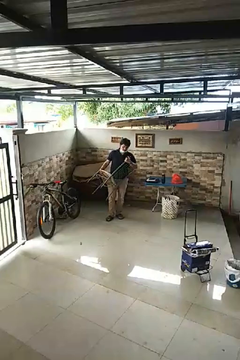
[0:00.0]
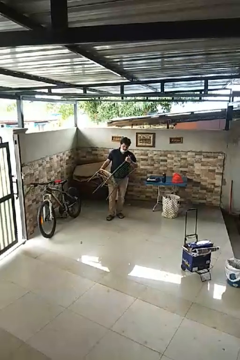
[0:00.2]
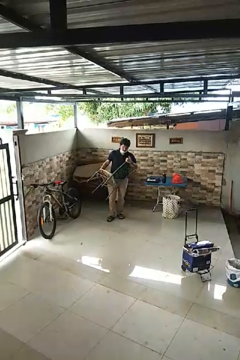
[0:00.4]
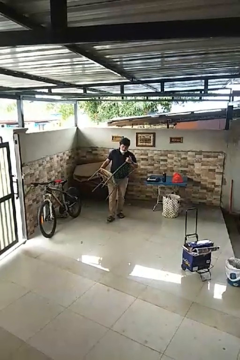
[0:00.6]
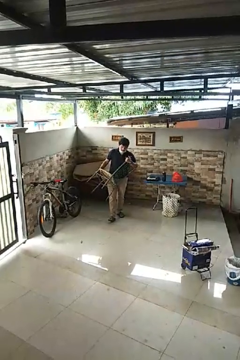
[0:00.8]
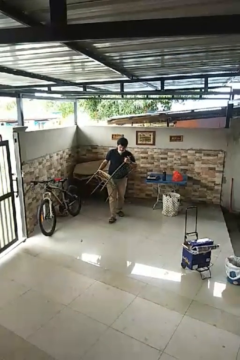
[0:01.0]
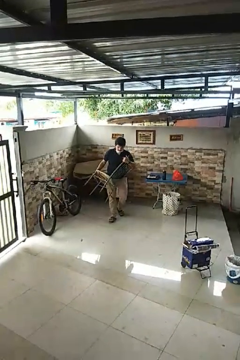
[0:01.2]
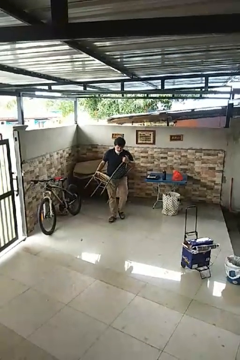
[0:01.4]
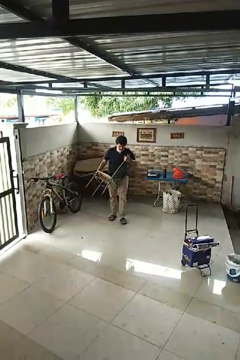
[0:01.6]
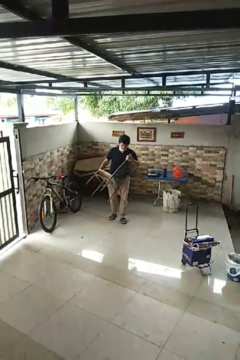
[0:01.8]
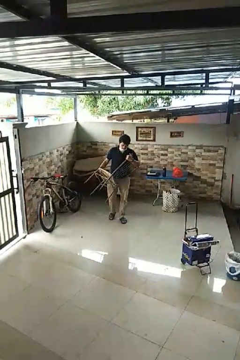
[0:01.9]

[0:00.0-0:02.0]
person carries furniture

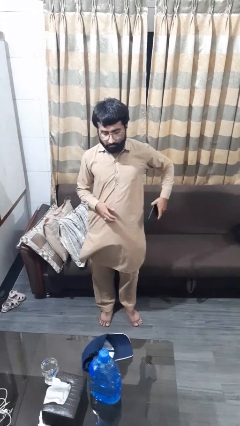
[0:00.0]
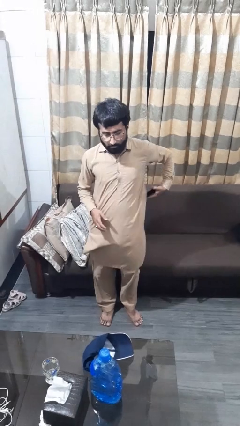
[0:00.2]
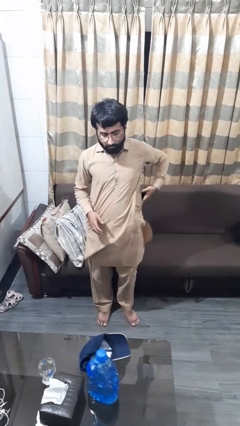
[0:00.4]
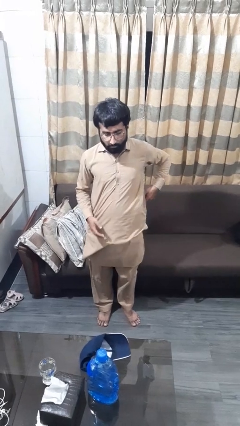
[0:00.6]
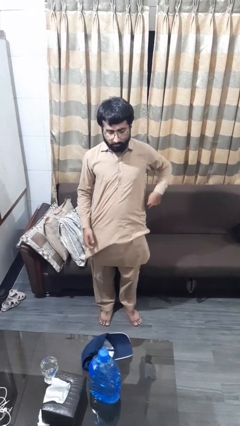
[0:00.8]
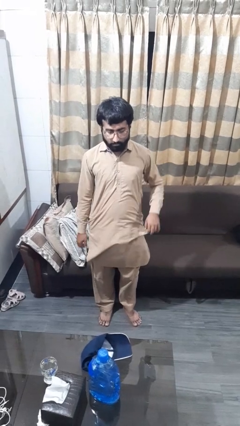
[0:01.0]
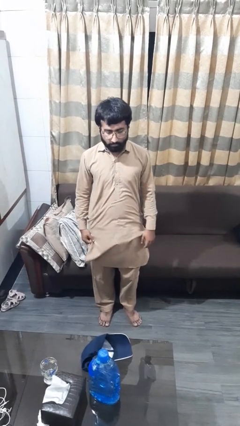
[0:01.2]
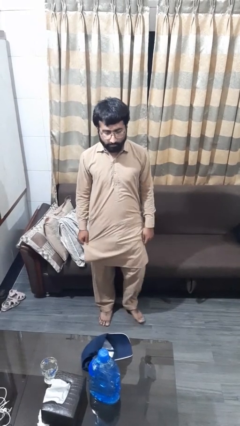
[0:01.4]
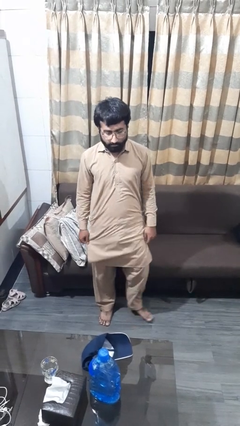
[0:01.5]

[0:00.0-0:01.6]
person puts phone into pocket

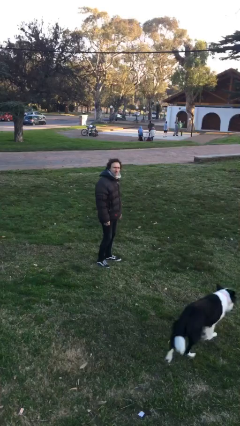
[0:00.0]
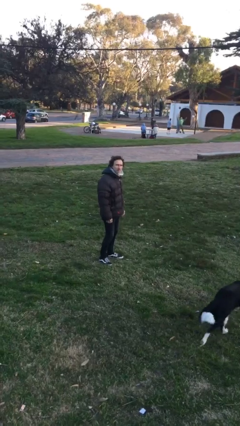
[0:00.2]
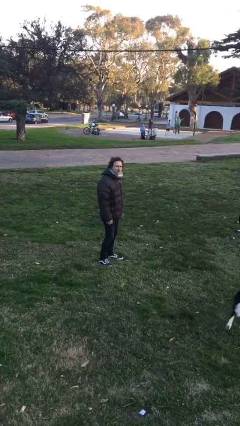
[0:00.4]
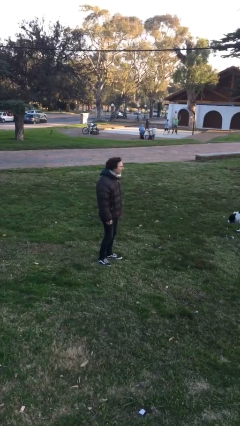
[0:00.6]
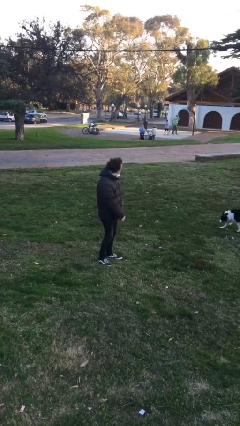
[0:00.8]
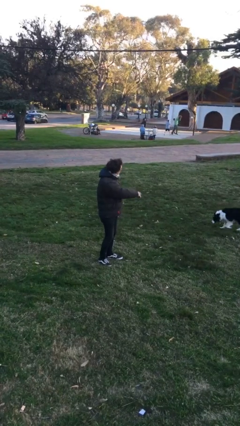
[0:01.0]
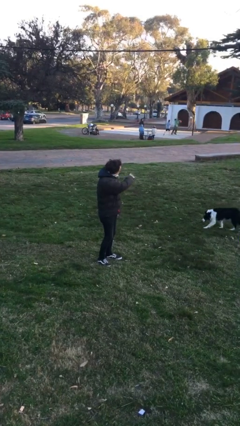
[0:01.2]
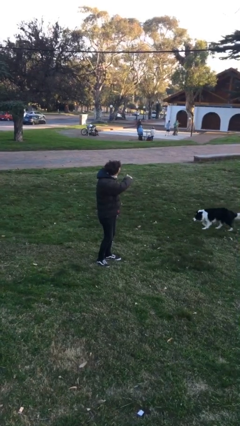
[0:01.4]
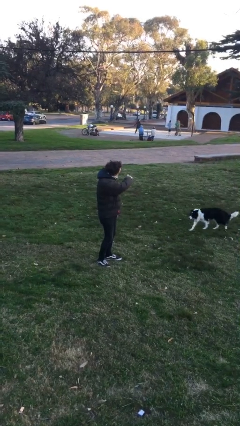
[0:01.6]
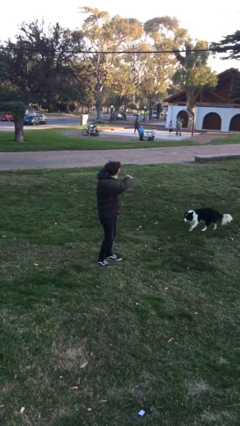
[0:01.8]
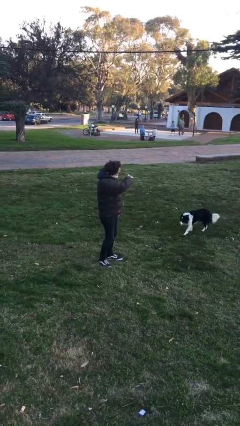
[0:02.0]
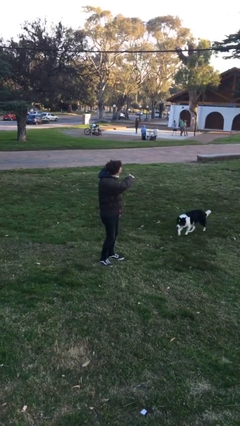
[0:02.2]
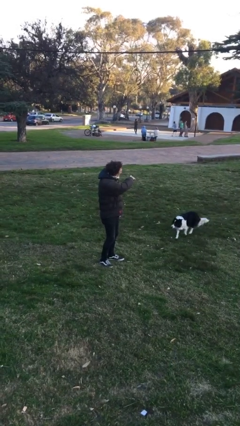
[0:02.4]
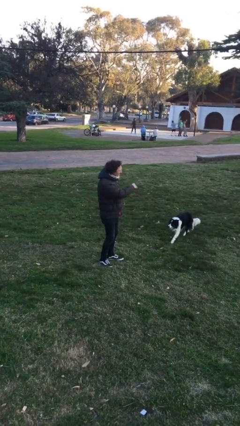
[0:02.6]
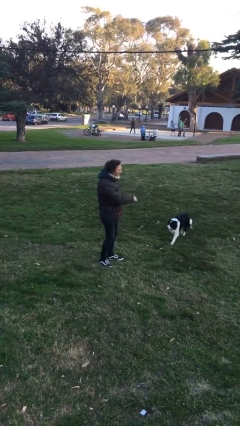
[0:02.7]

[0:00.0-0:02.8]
person points at person

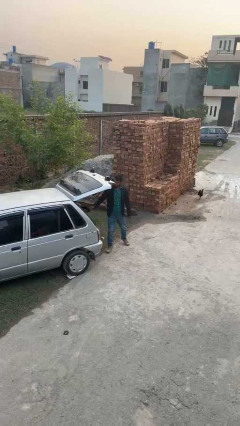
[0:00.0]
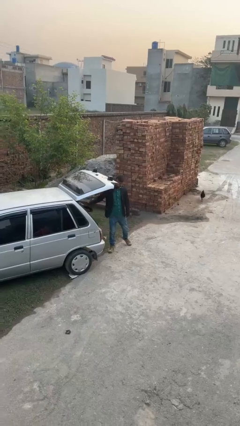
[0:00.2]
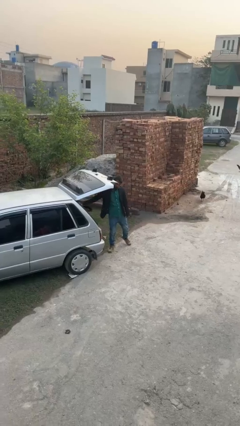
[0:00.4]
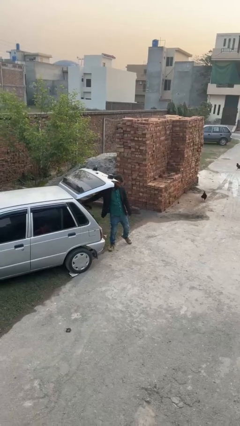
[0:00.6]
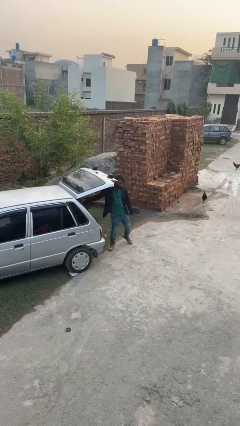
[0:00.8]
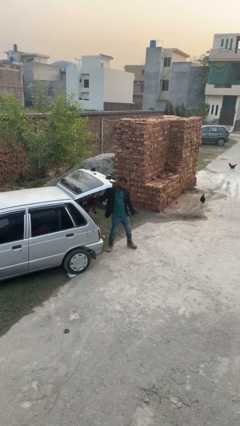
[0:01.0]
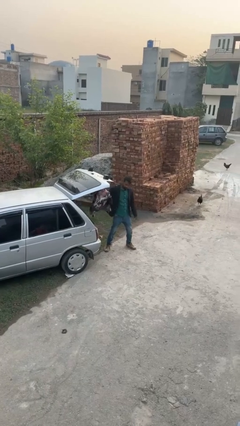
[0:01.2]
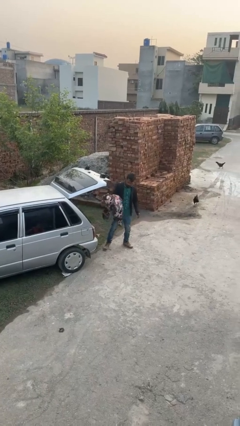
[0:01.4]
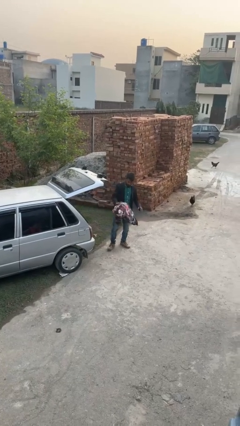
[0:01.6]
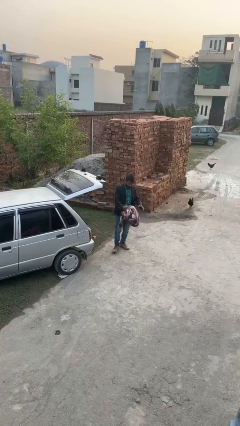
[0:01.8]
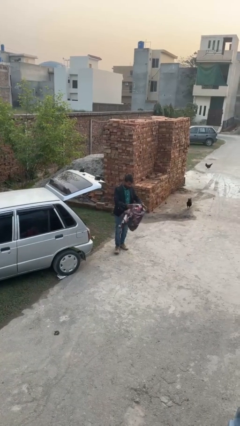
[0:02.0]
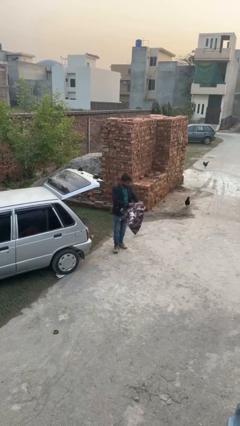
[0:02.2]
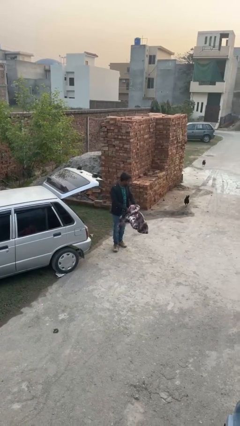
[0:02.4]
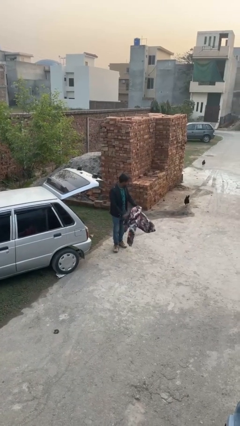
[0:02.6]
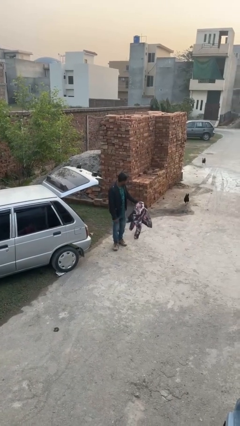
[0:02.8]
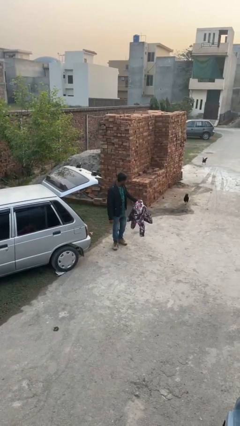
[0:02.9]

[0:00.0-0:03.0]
person unloads car
